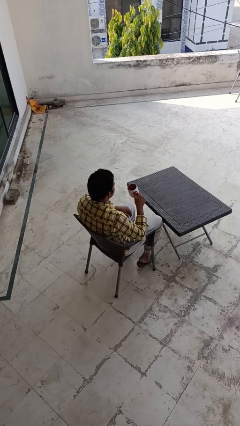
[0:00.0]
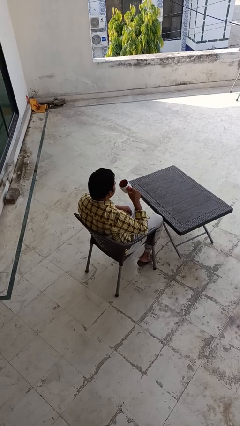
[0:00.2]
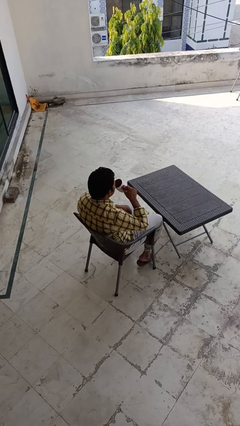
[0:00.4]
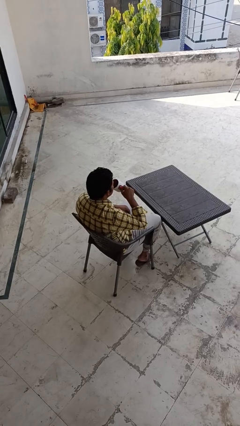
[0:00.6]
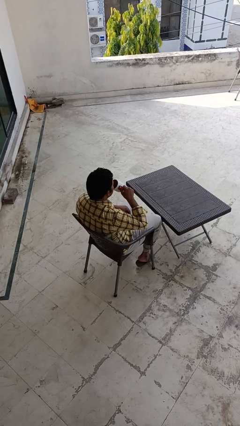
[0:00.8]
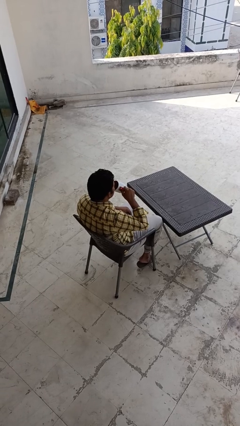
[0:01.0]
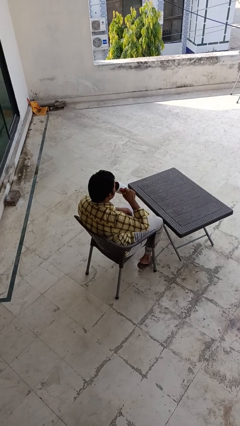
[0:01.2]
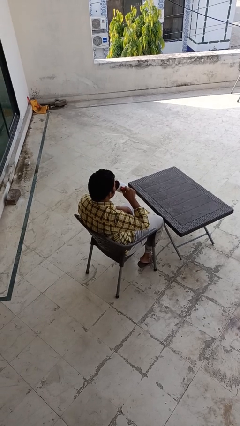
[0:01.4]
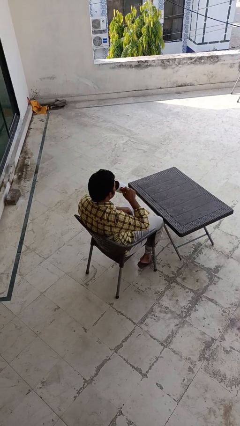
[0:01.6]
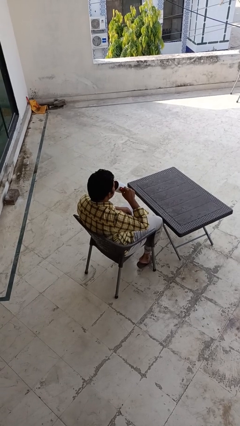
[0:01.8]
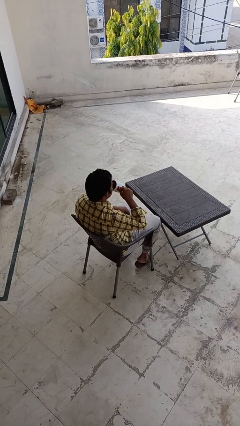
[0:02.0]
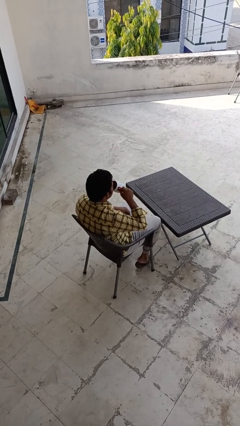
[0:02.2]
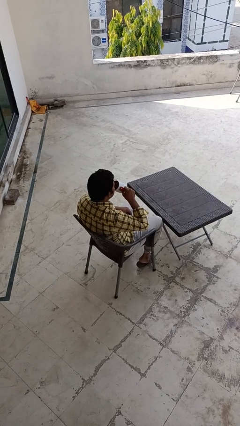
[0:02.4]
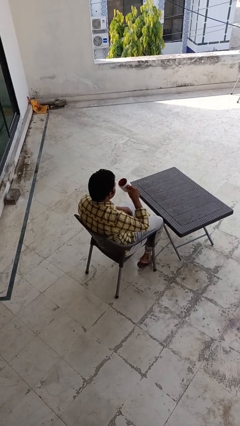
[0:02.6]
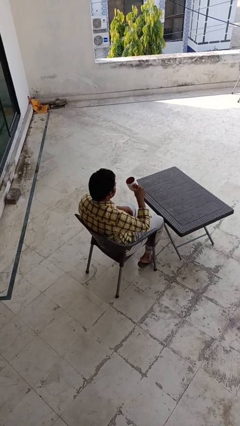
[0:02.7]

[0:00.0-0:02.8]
person drinks from mug

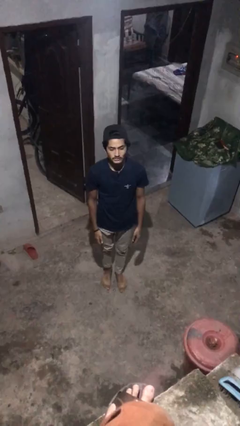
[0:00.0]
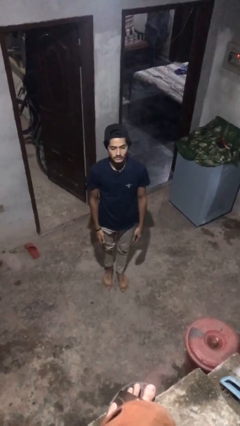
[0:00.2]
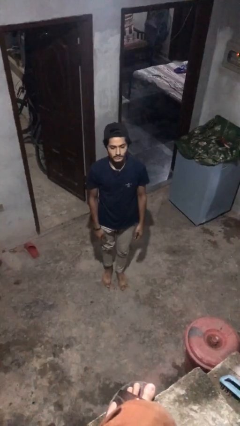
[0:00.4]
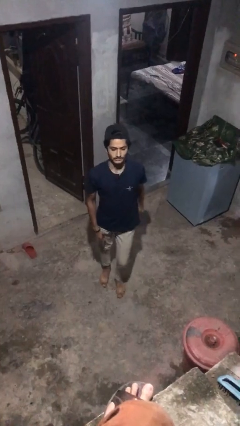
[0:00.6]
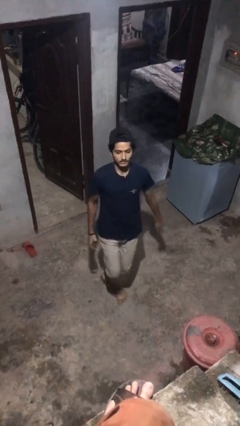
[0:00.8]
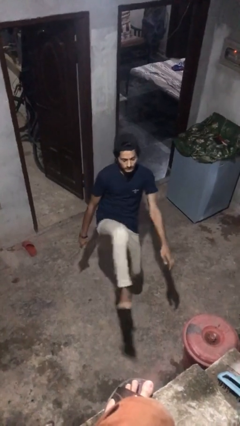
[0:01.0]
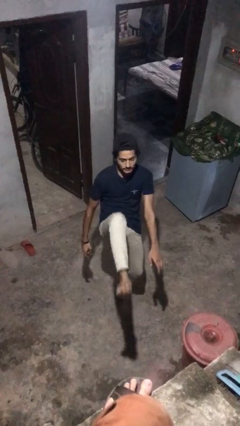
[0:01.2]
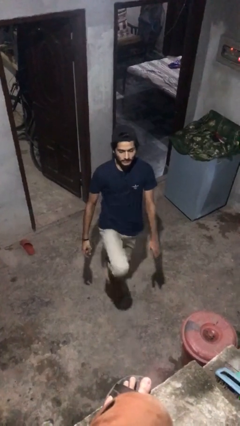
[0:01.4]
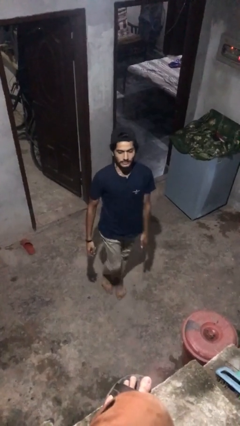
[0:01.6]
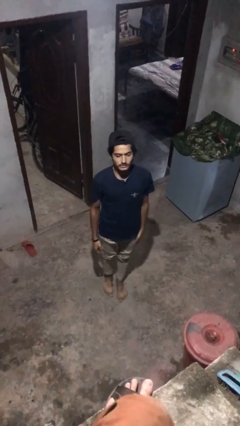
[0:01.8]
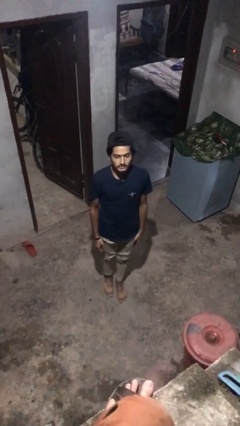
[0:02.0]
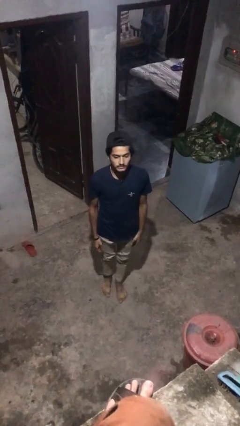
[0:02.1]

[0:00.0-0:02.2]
person karate kicks

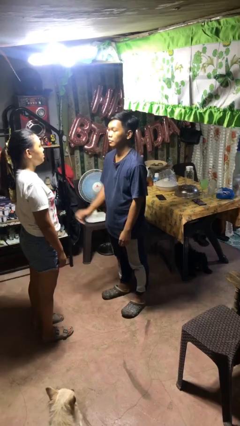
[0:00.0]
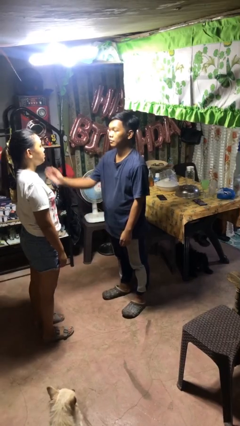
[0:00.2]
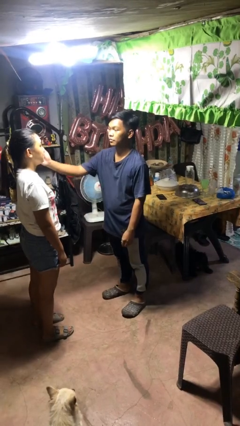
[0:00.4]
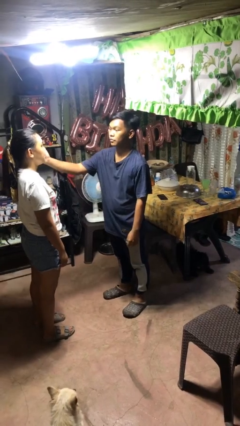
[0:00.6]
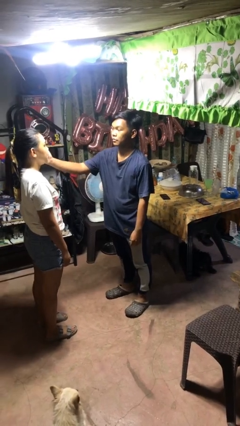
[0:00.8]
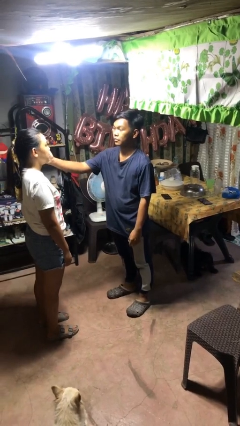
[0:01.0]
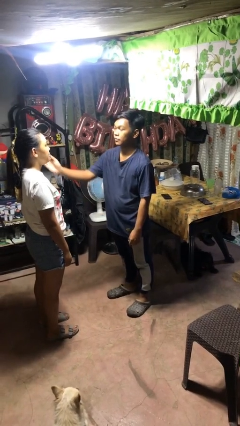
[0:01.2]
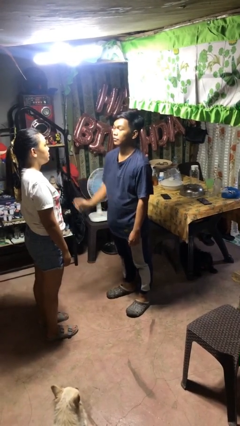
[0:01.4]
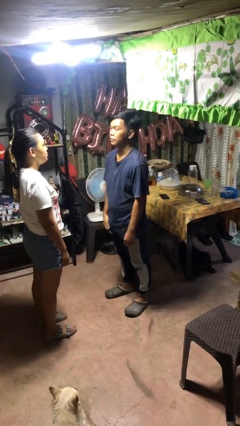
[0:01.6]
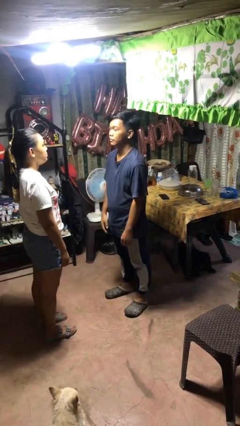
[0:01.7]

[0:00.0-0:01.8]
person touches face of person

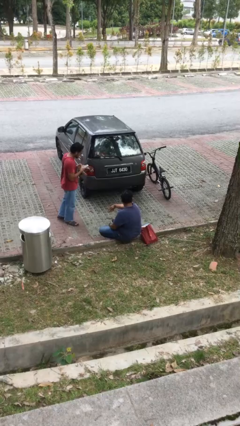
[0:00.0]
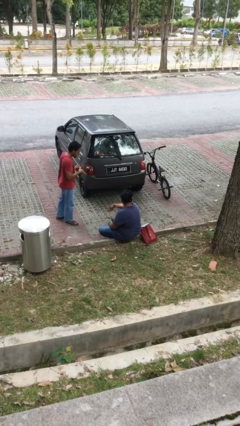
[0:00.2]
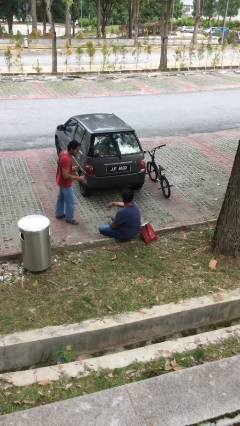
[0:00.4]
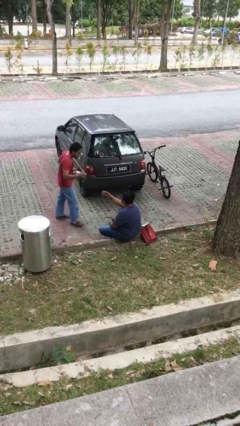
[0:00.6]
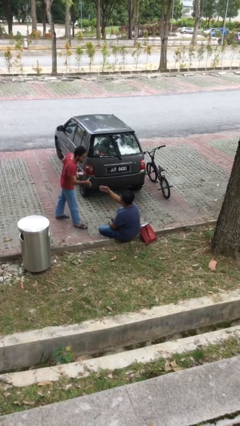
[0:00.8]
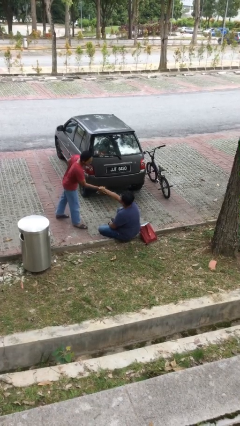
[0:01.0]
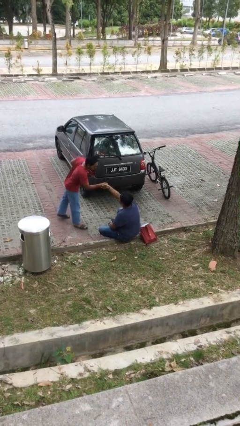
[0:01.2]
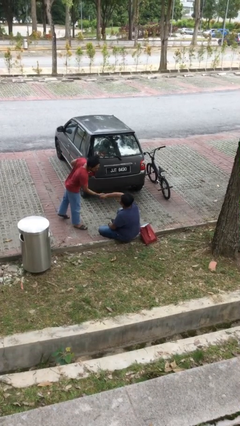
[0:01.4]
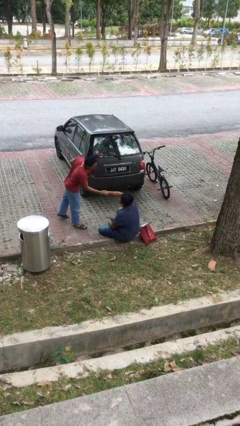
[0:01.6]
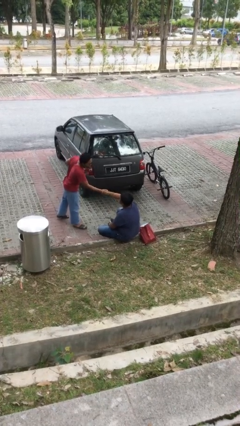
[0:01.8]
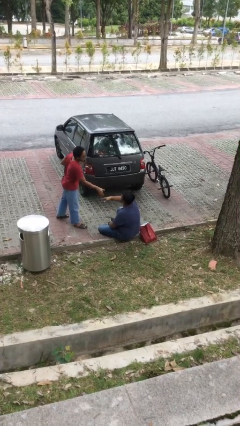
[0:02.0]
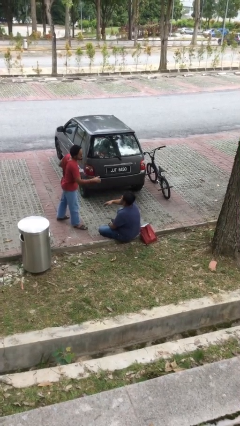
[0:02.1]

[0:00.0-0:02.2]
person shakes hand

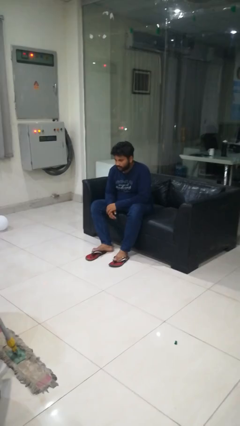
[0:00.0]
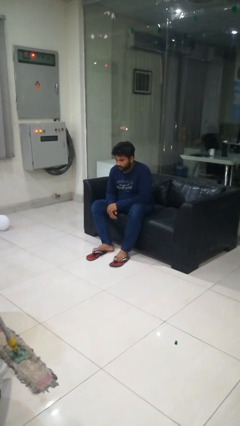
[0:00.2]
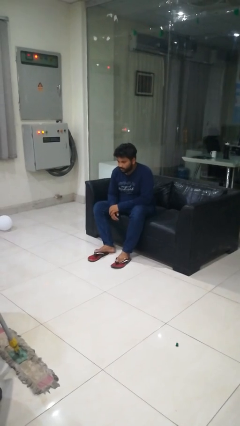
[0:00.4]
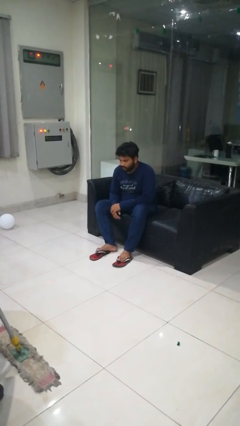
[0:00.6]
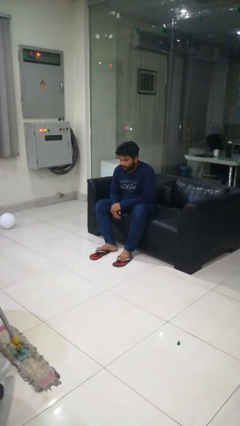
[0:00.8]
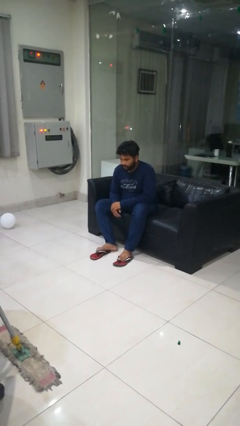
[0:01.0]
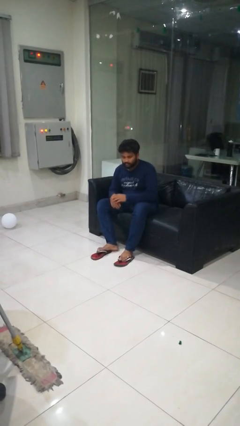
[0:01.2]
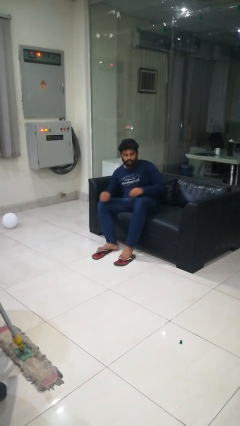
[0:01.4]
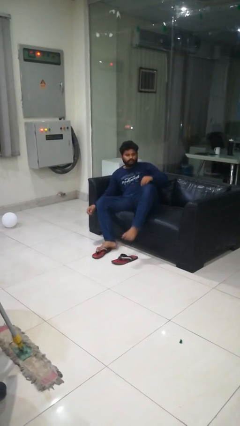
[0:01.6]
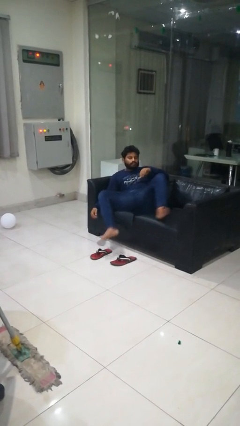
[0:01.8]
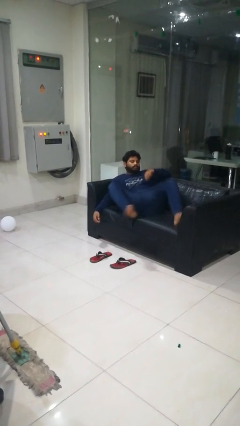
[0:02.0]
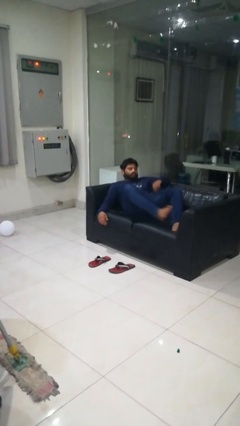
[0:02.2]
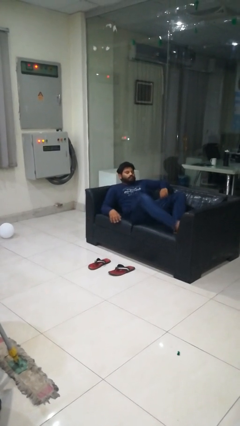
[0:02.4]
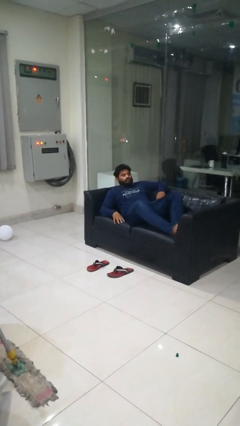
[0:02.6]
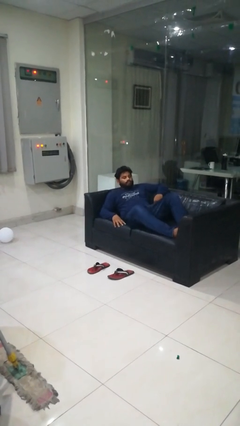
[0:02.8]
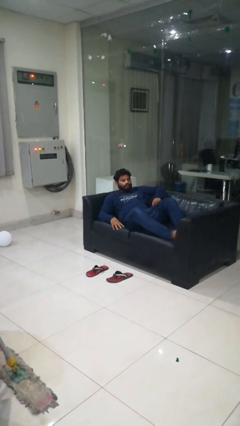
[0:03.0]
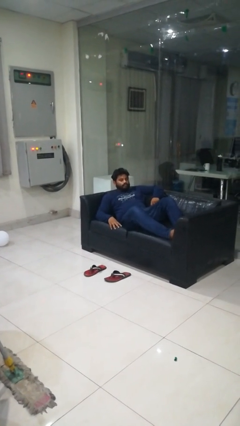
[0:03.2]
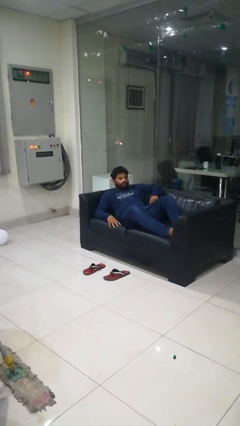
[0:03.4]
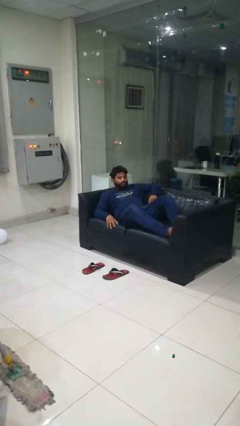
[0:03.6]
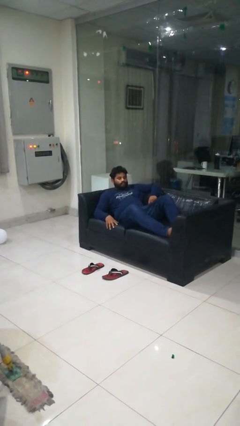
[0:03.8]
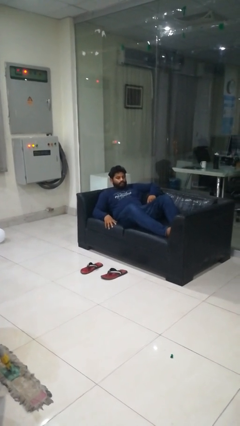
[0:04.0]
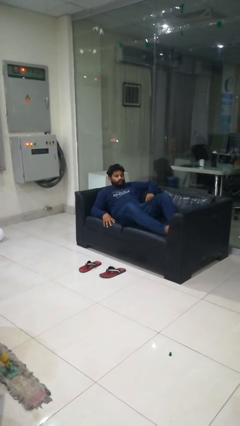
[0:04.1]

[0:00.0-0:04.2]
person lies down on couch

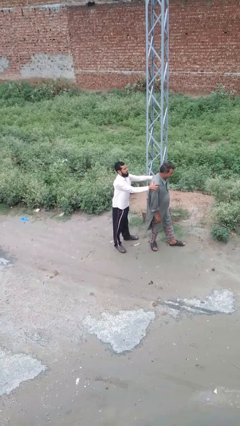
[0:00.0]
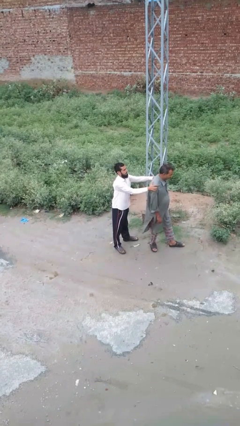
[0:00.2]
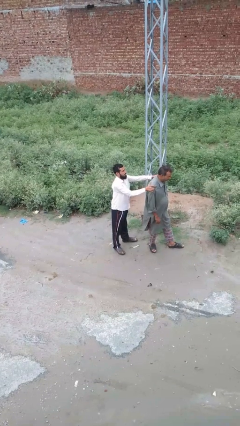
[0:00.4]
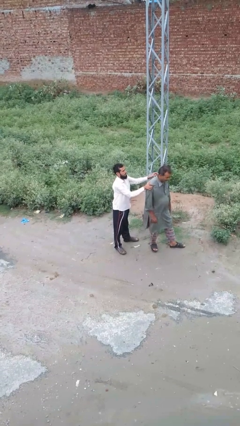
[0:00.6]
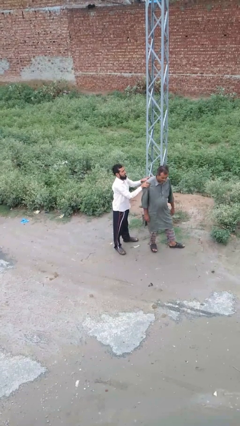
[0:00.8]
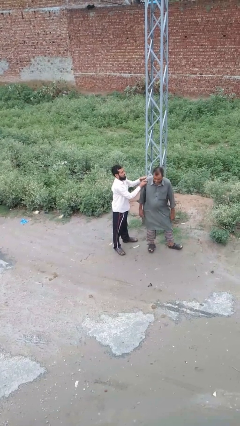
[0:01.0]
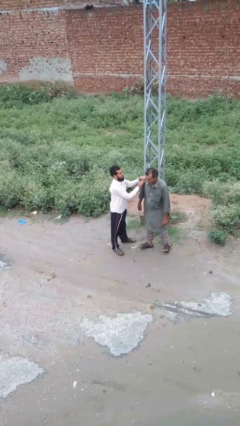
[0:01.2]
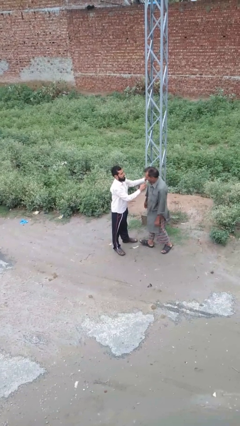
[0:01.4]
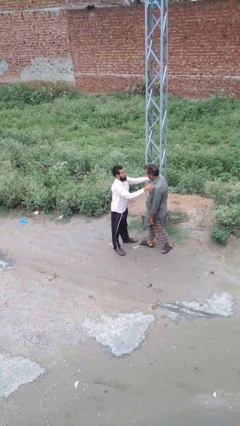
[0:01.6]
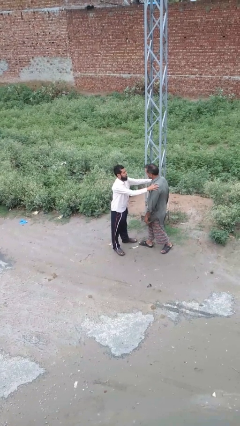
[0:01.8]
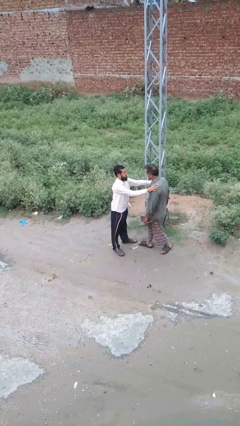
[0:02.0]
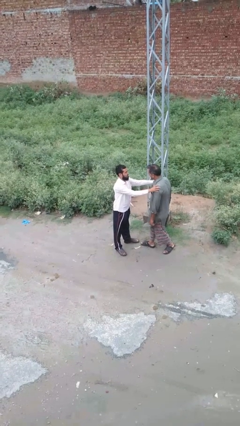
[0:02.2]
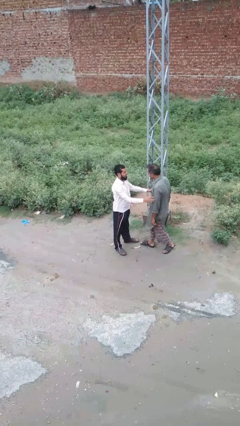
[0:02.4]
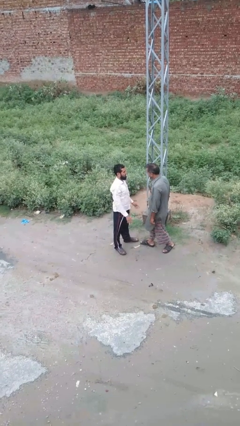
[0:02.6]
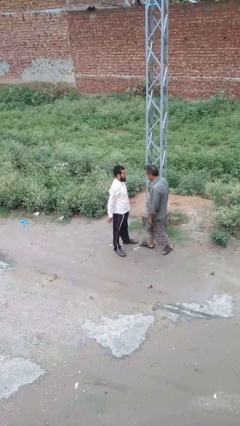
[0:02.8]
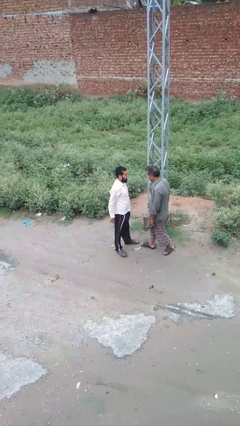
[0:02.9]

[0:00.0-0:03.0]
person spins person around

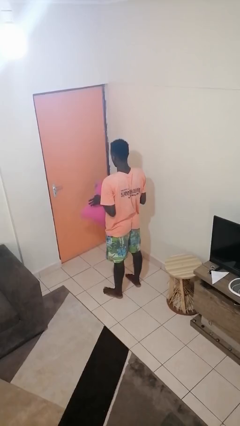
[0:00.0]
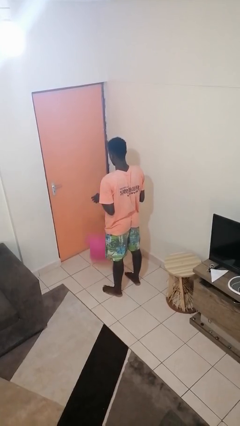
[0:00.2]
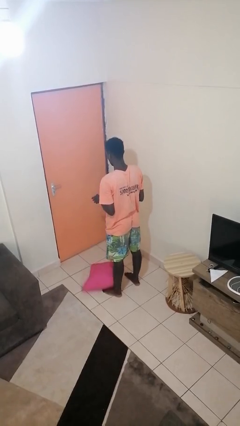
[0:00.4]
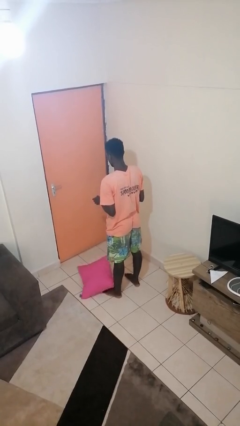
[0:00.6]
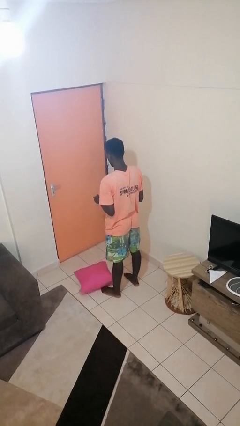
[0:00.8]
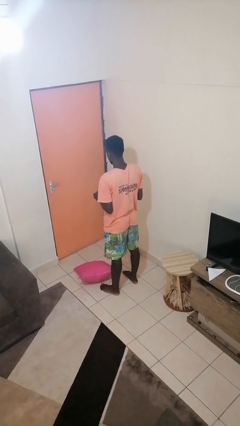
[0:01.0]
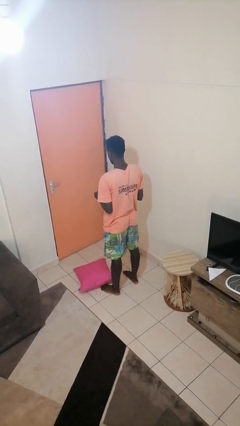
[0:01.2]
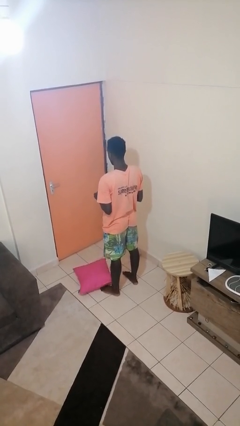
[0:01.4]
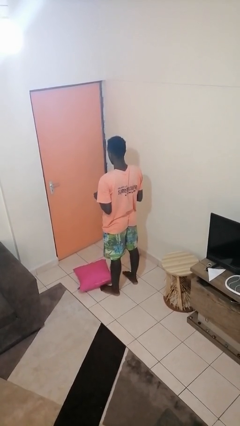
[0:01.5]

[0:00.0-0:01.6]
person drops object
